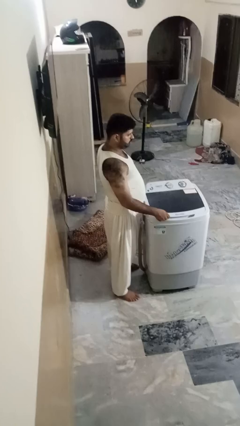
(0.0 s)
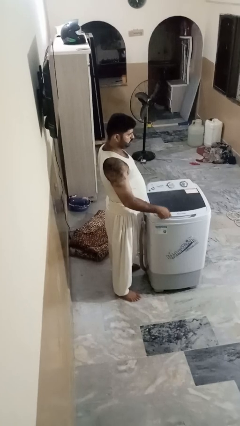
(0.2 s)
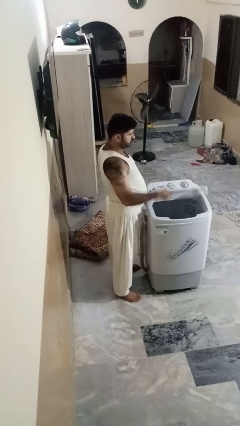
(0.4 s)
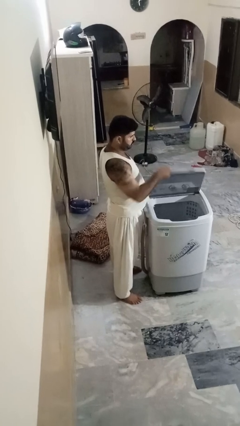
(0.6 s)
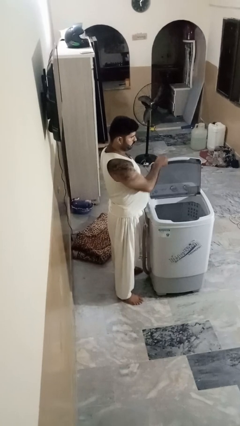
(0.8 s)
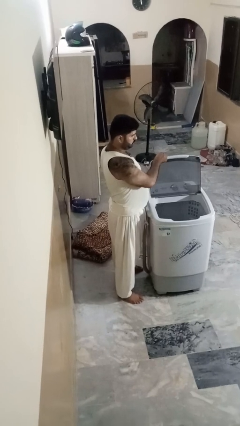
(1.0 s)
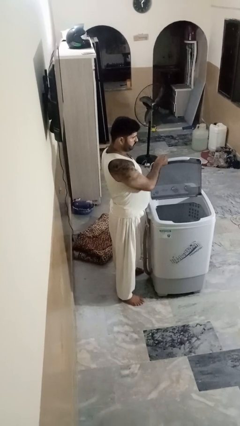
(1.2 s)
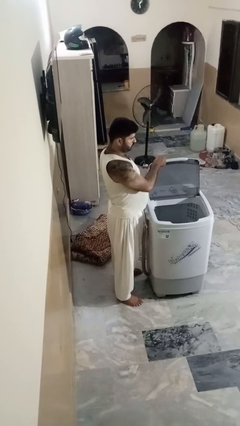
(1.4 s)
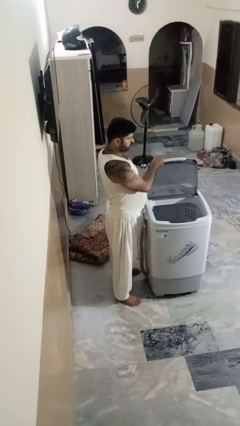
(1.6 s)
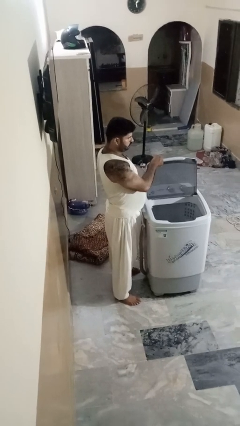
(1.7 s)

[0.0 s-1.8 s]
person opens clothes washer

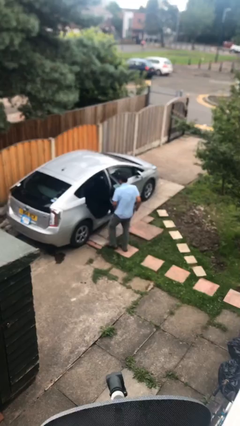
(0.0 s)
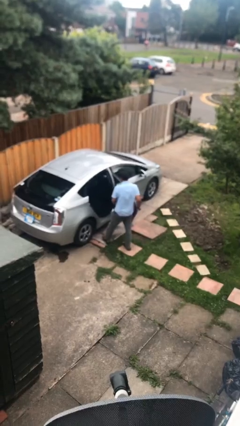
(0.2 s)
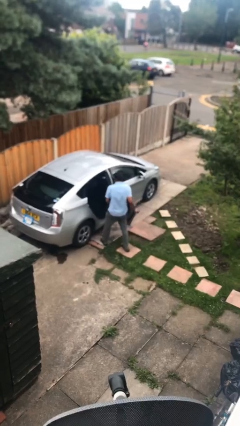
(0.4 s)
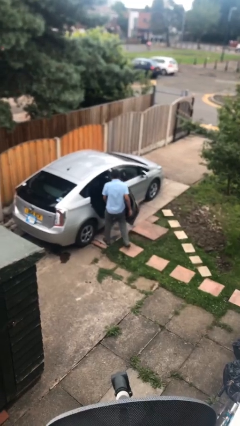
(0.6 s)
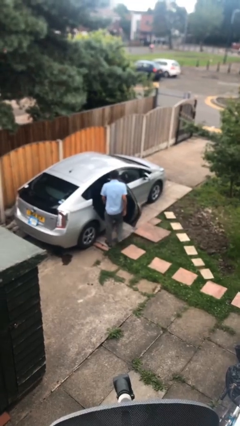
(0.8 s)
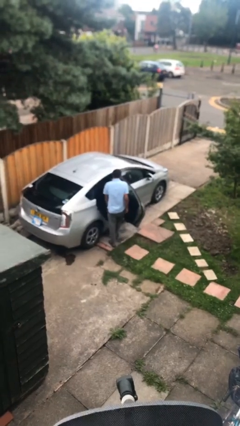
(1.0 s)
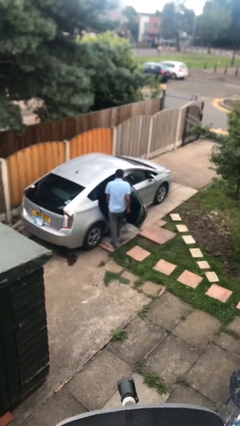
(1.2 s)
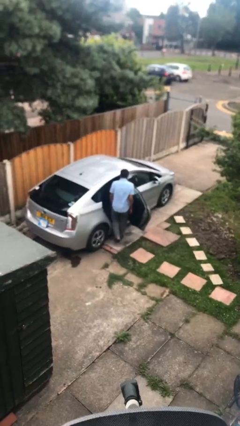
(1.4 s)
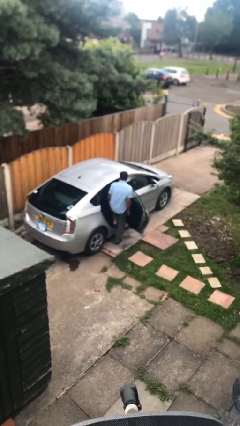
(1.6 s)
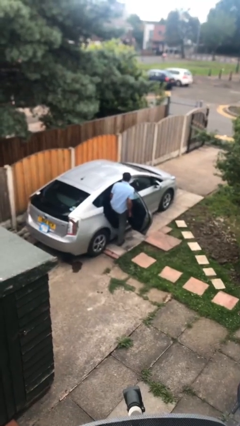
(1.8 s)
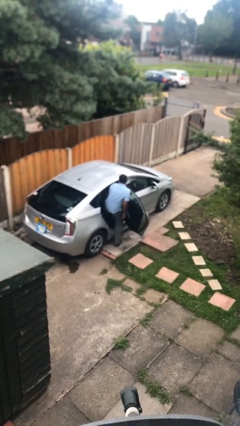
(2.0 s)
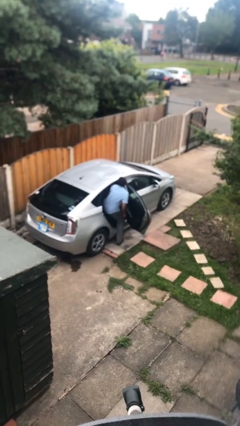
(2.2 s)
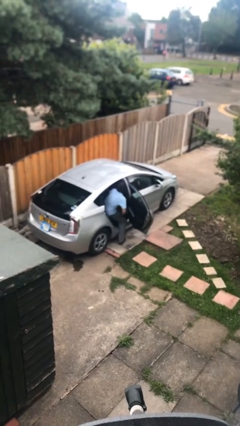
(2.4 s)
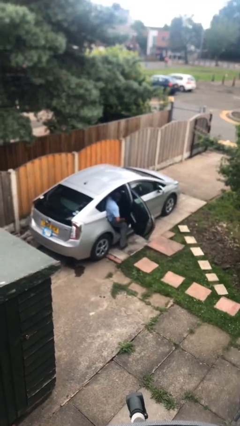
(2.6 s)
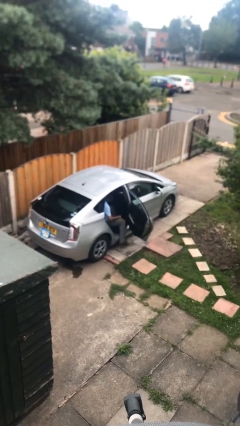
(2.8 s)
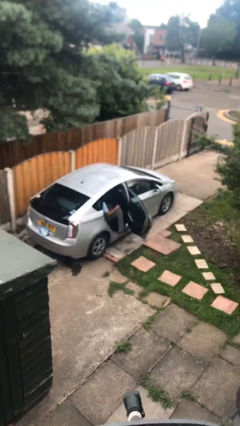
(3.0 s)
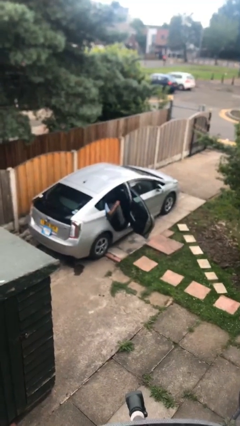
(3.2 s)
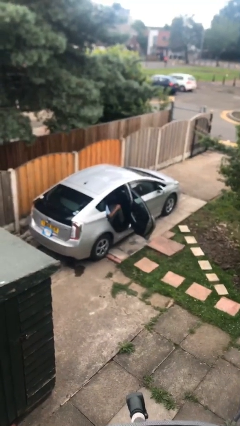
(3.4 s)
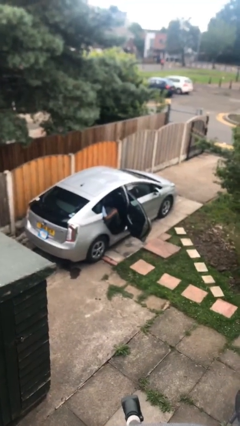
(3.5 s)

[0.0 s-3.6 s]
person enters car

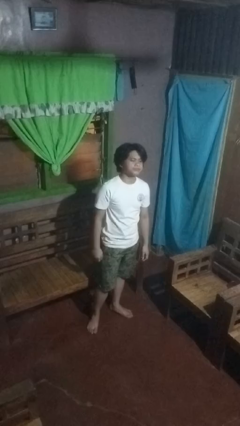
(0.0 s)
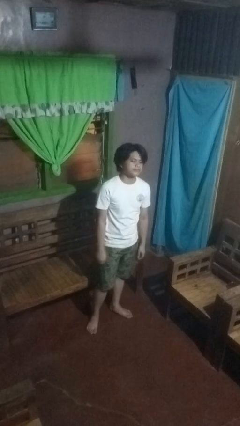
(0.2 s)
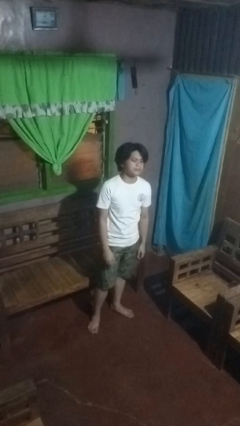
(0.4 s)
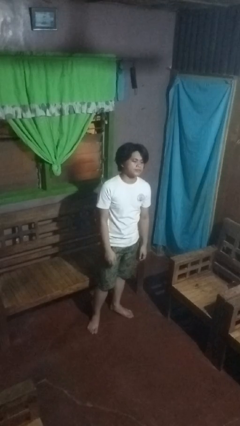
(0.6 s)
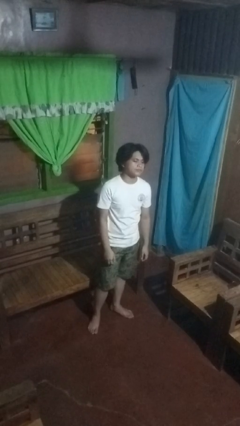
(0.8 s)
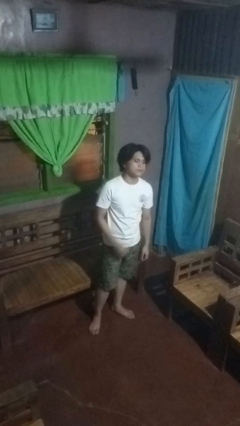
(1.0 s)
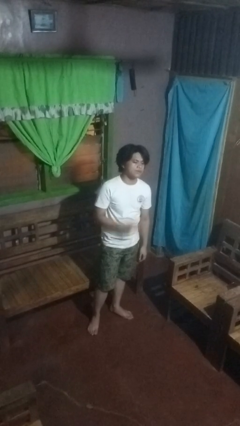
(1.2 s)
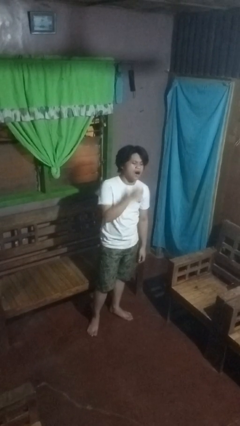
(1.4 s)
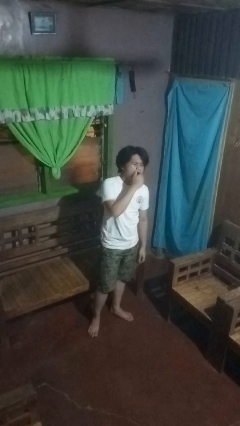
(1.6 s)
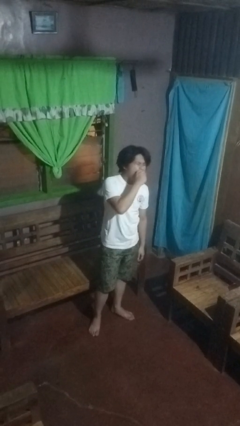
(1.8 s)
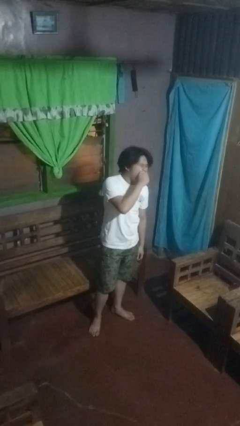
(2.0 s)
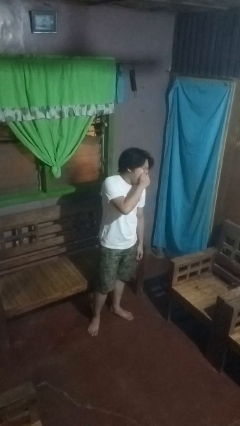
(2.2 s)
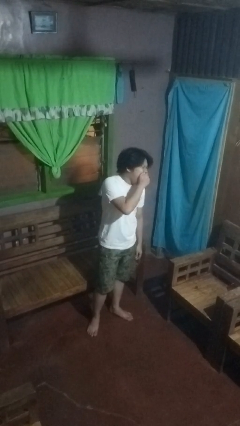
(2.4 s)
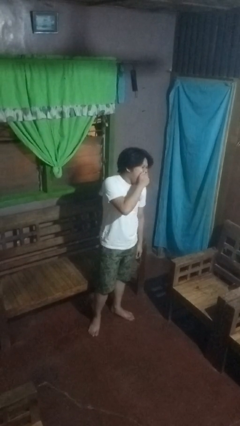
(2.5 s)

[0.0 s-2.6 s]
person yawns

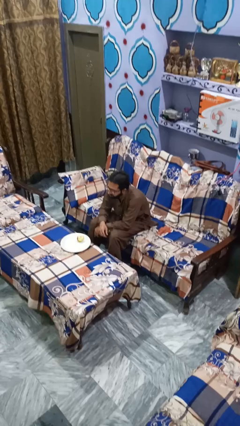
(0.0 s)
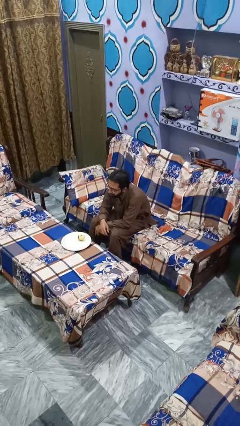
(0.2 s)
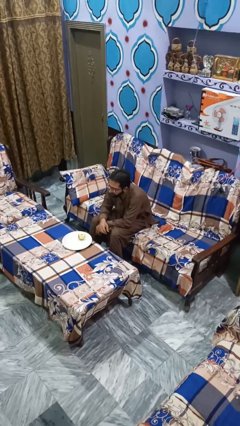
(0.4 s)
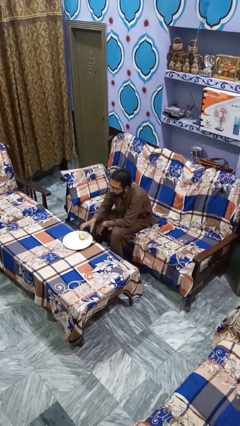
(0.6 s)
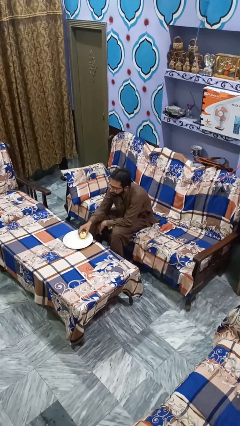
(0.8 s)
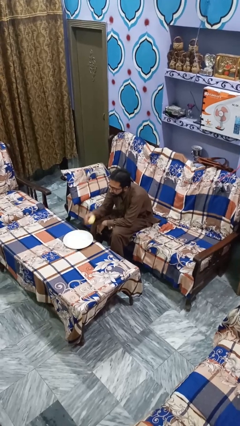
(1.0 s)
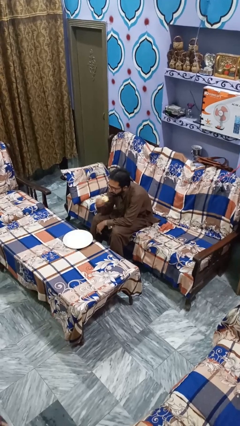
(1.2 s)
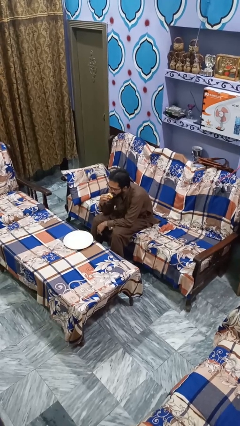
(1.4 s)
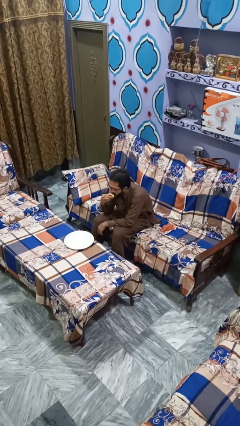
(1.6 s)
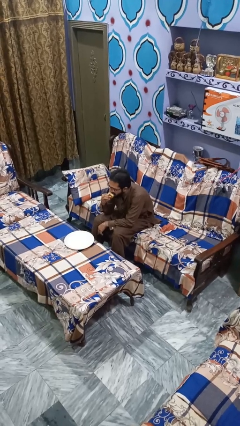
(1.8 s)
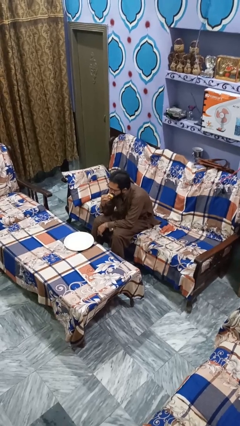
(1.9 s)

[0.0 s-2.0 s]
person eats apple

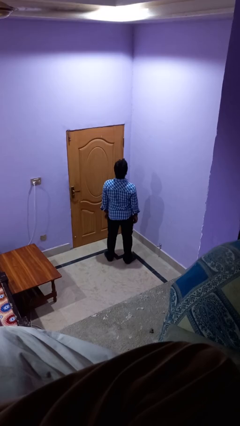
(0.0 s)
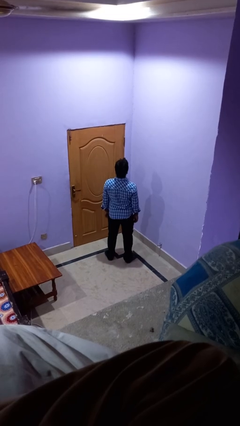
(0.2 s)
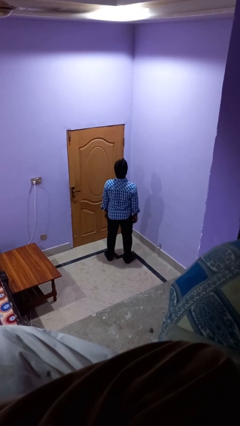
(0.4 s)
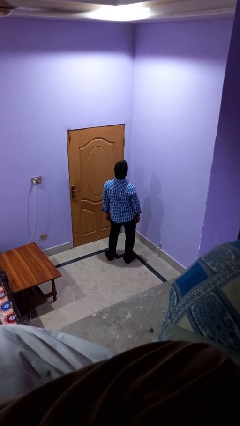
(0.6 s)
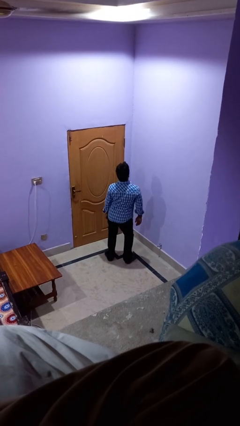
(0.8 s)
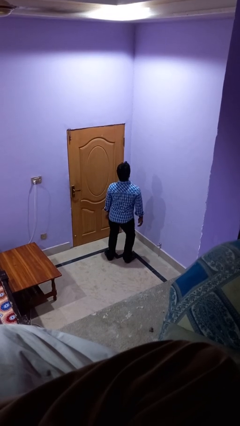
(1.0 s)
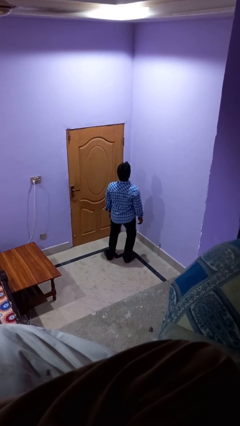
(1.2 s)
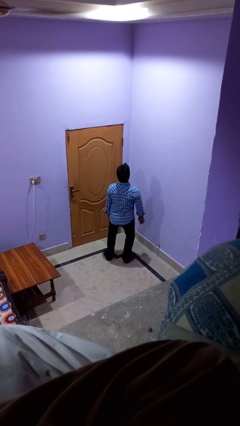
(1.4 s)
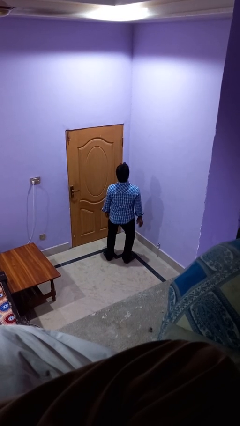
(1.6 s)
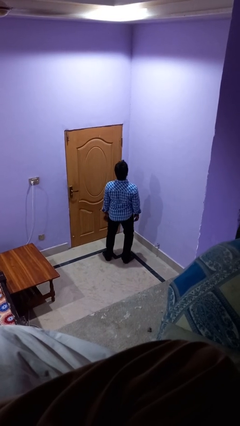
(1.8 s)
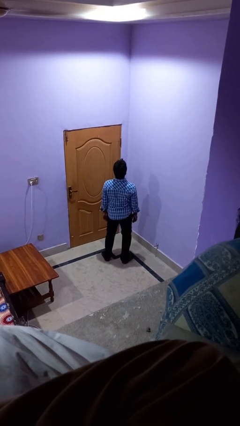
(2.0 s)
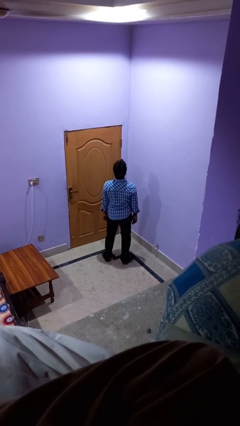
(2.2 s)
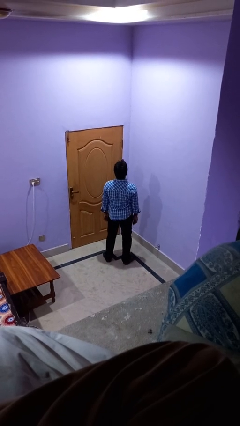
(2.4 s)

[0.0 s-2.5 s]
person wiggles hips

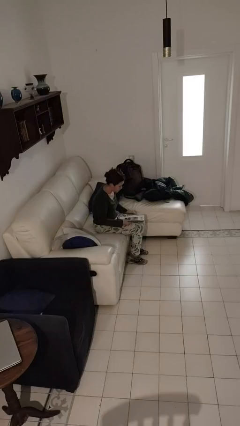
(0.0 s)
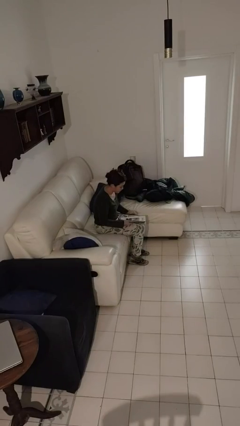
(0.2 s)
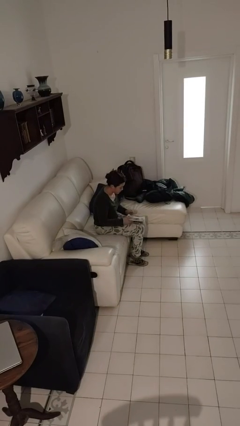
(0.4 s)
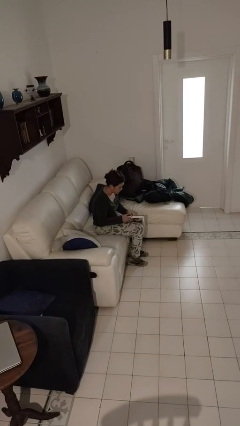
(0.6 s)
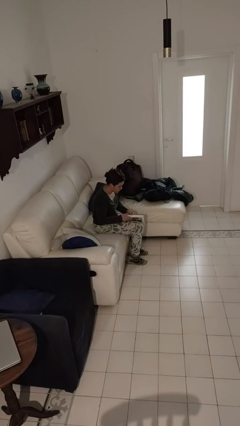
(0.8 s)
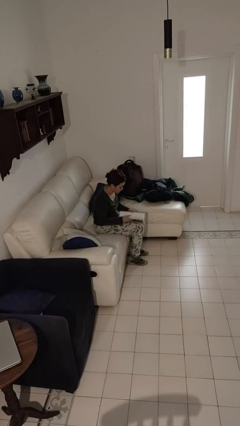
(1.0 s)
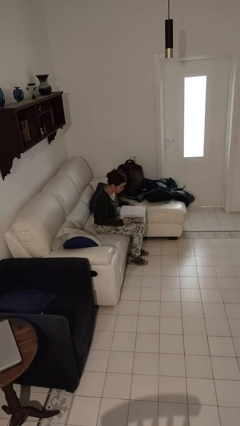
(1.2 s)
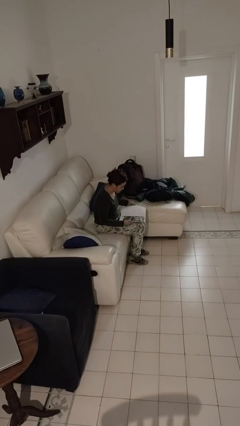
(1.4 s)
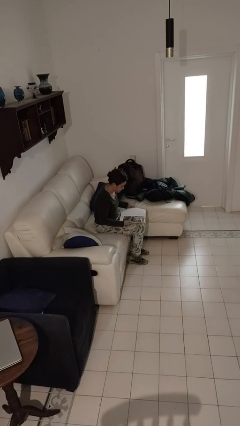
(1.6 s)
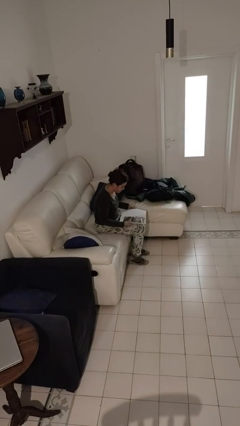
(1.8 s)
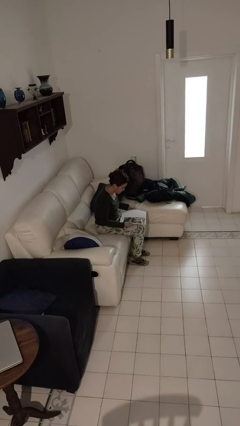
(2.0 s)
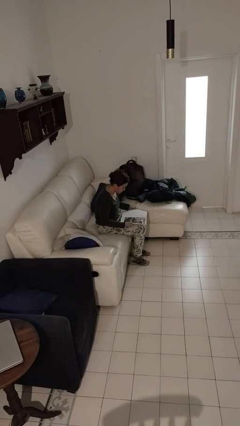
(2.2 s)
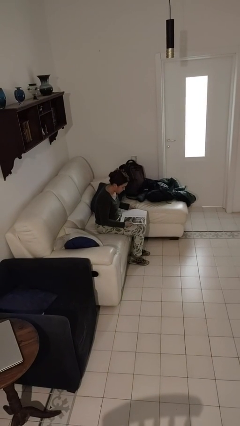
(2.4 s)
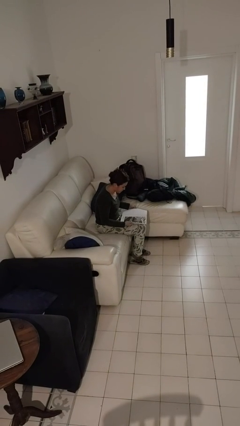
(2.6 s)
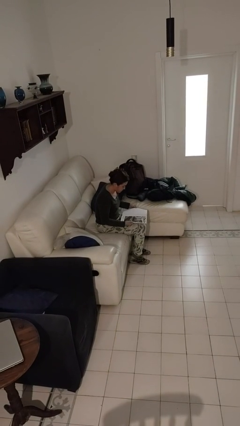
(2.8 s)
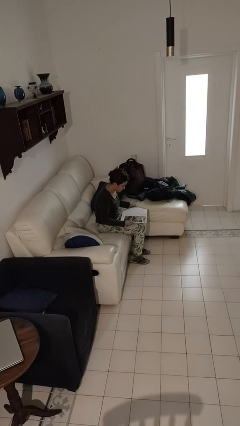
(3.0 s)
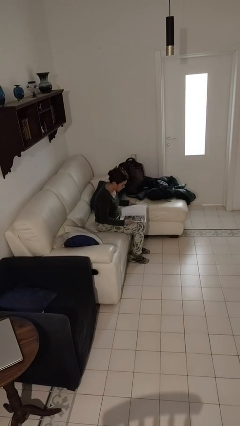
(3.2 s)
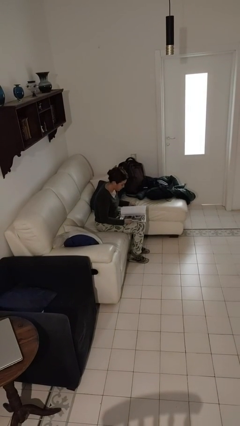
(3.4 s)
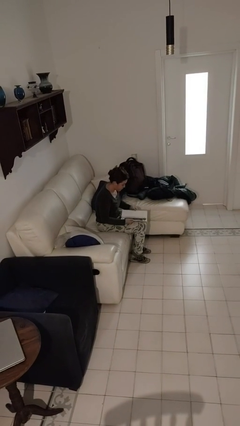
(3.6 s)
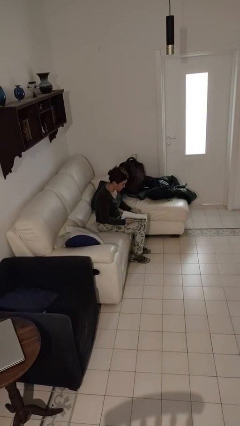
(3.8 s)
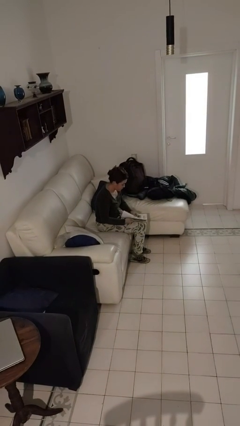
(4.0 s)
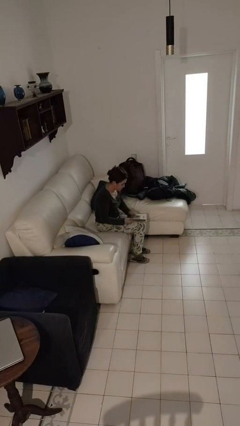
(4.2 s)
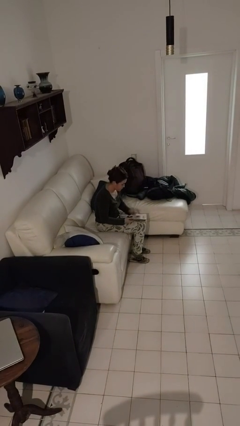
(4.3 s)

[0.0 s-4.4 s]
person reads magazine

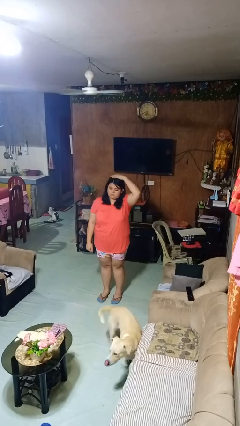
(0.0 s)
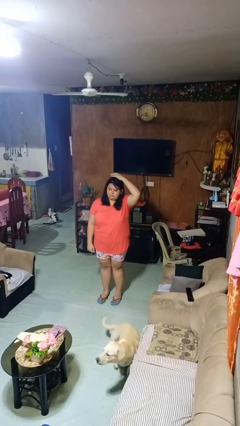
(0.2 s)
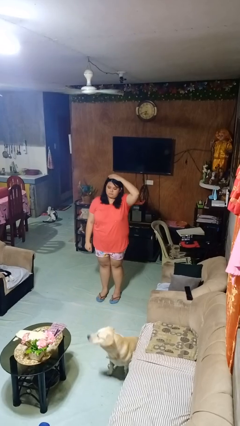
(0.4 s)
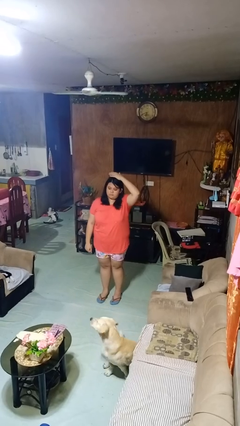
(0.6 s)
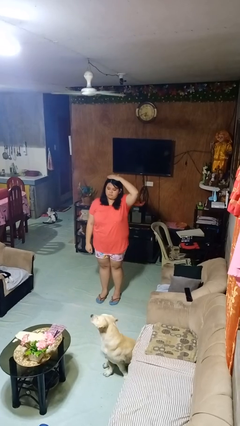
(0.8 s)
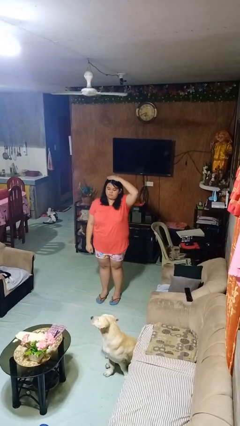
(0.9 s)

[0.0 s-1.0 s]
person pats head
